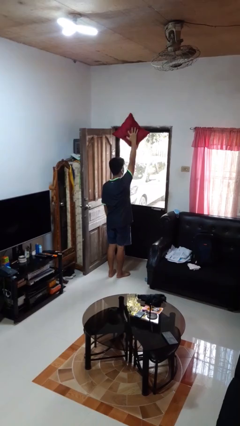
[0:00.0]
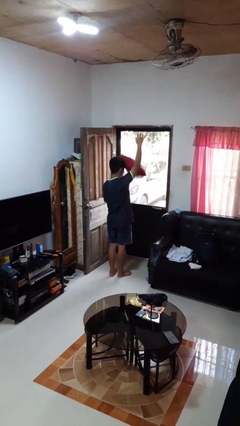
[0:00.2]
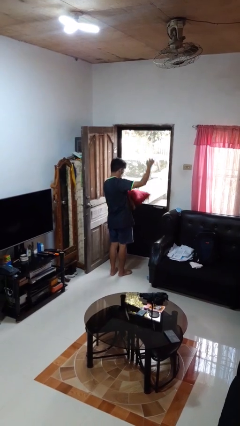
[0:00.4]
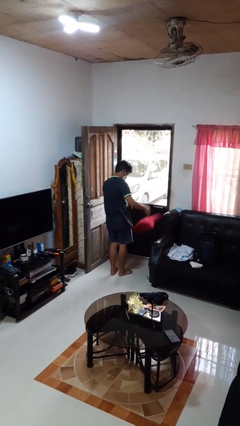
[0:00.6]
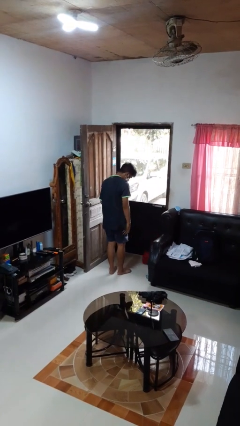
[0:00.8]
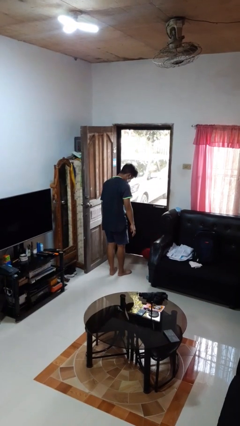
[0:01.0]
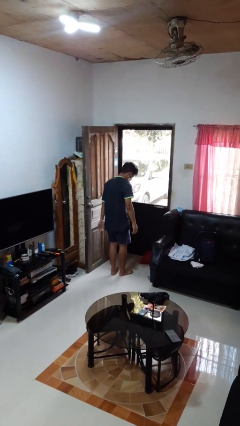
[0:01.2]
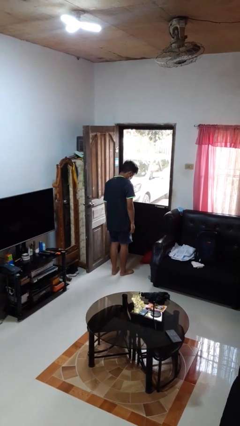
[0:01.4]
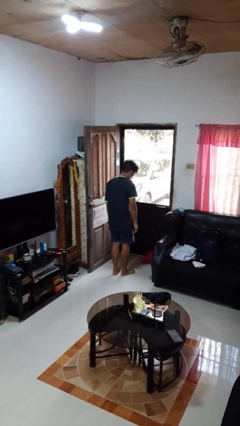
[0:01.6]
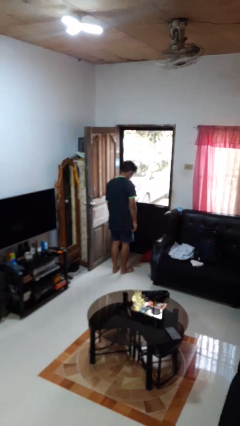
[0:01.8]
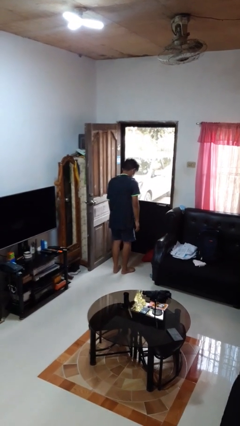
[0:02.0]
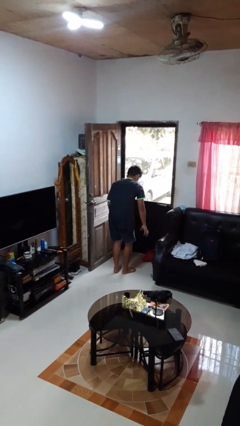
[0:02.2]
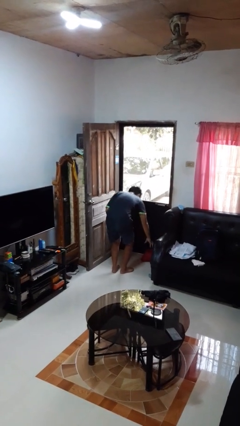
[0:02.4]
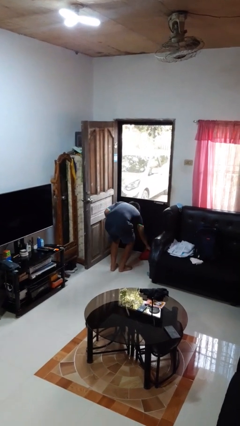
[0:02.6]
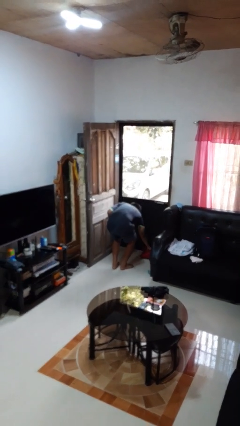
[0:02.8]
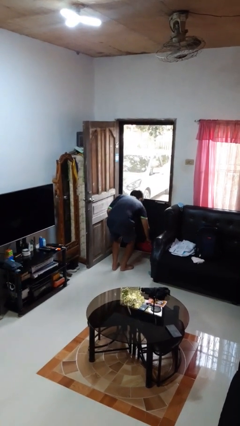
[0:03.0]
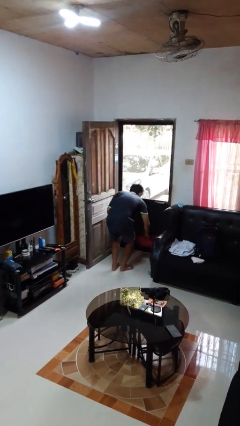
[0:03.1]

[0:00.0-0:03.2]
person drops object

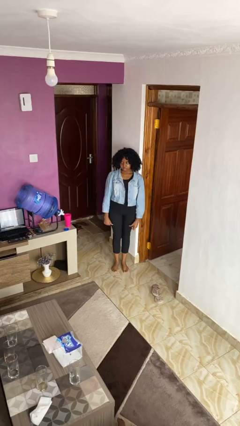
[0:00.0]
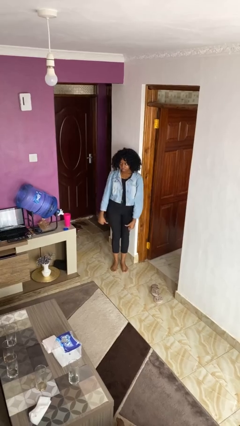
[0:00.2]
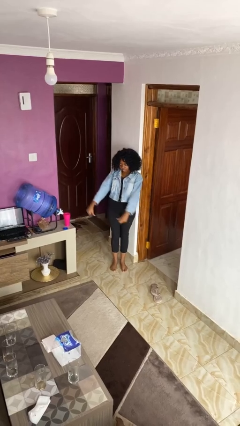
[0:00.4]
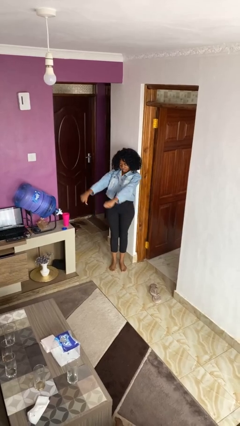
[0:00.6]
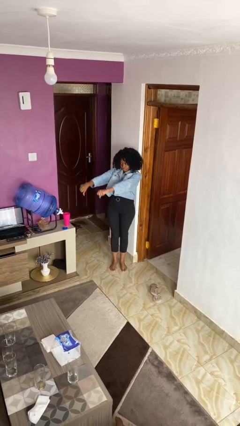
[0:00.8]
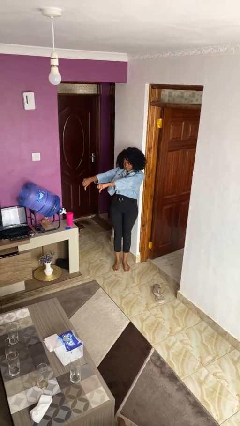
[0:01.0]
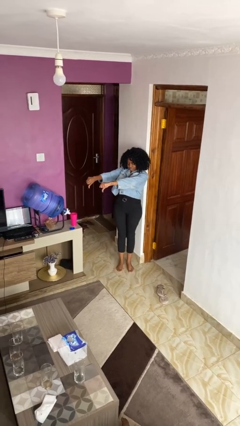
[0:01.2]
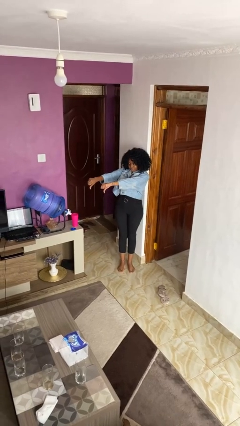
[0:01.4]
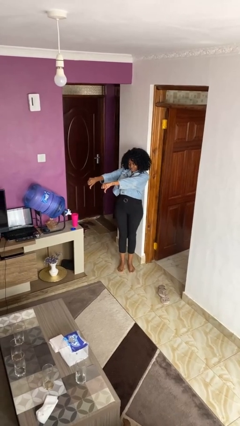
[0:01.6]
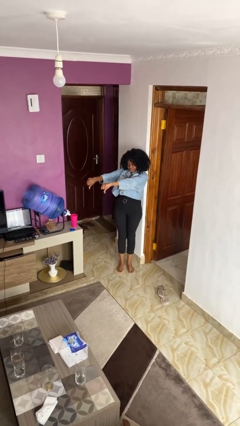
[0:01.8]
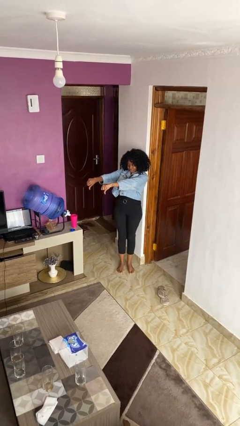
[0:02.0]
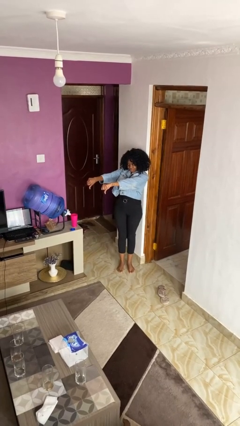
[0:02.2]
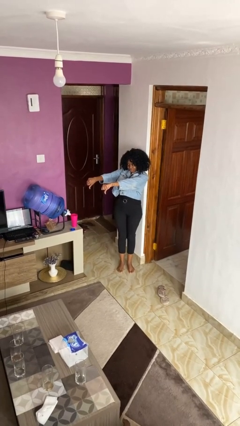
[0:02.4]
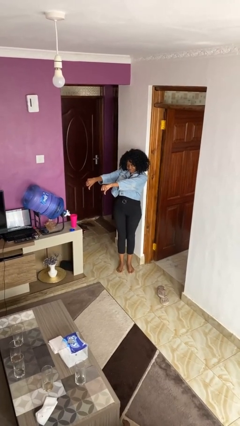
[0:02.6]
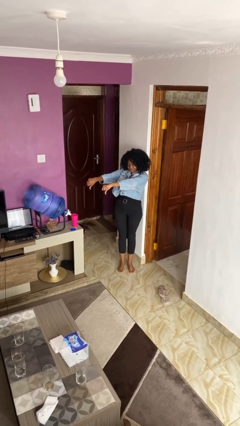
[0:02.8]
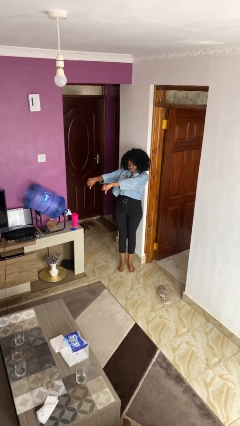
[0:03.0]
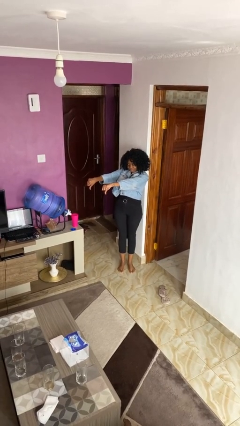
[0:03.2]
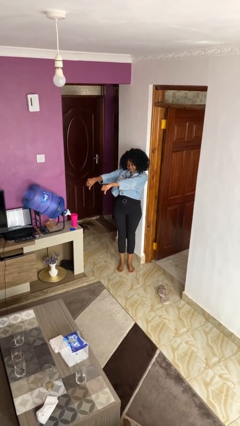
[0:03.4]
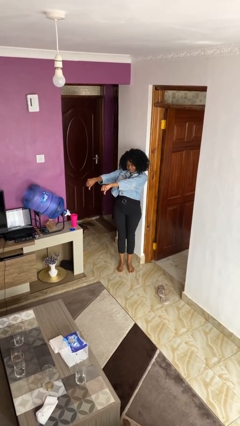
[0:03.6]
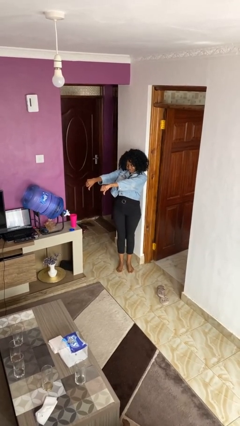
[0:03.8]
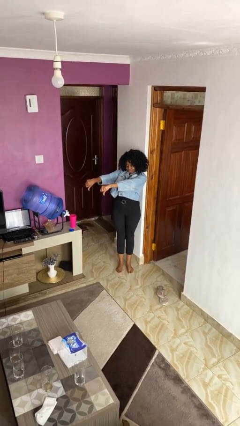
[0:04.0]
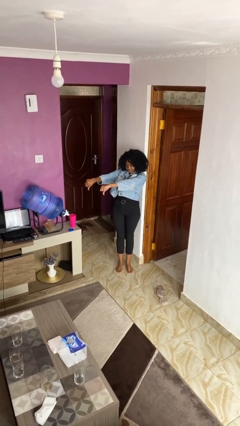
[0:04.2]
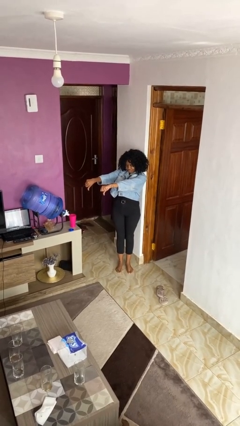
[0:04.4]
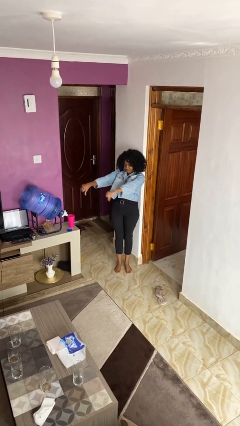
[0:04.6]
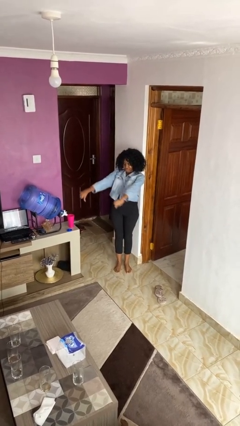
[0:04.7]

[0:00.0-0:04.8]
person gestures thumbs down

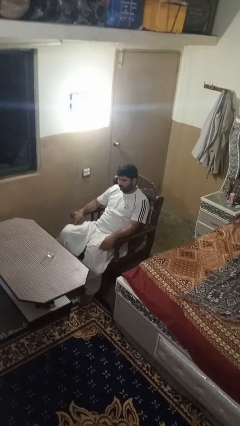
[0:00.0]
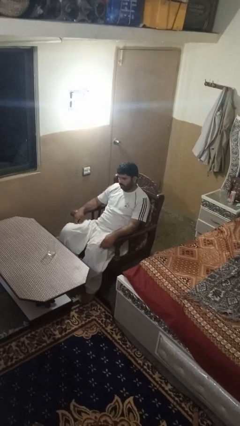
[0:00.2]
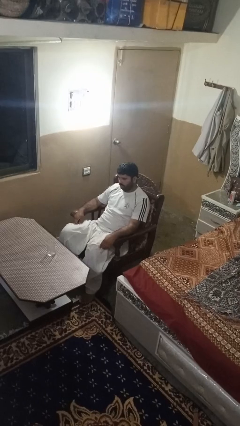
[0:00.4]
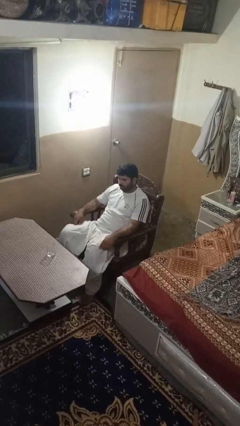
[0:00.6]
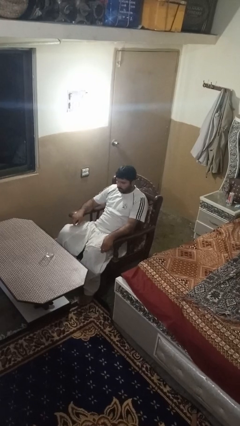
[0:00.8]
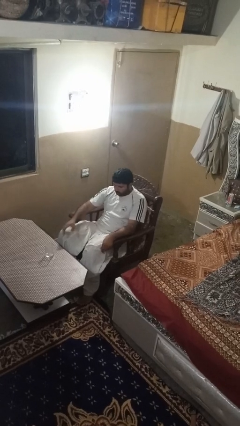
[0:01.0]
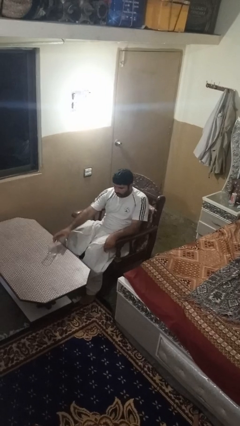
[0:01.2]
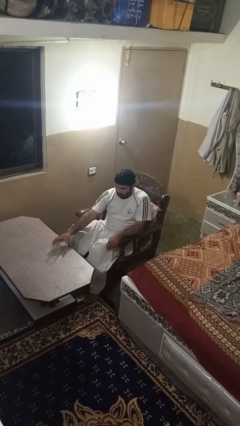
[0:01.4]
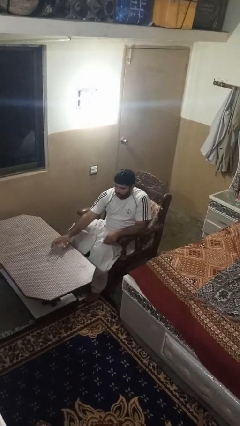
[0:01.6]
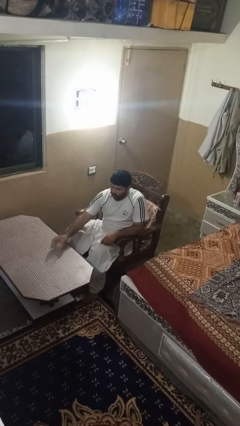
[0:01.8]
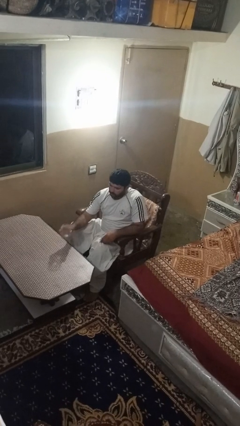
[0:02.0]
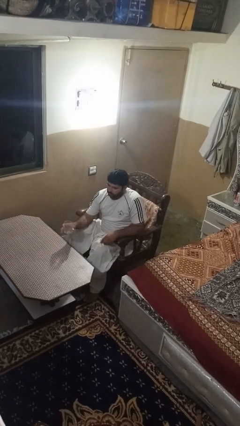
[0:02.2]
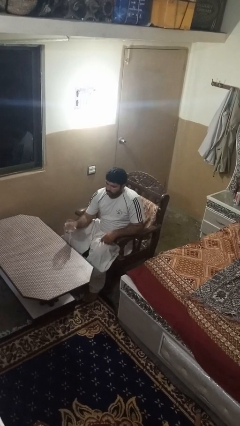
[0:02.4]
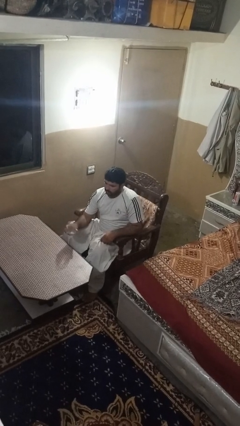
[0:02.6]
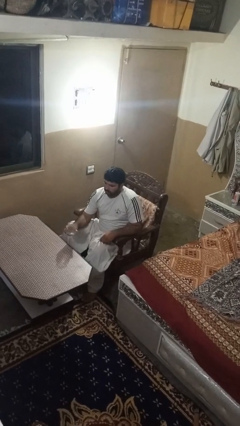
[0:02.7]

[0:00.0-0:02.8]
person picks up object from table

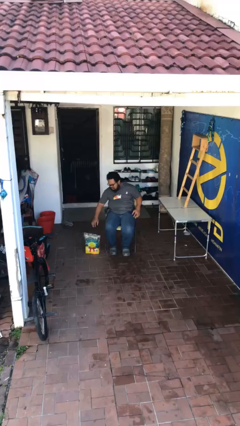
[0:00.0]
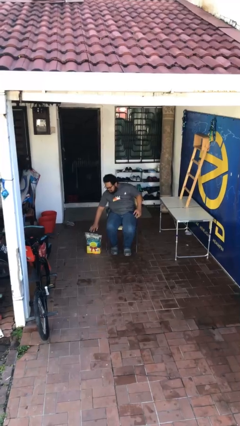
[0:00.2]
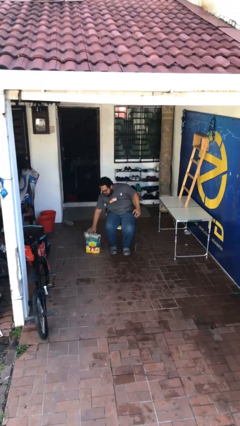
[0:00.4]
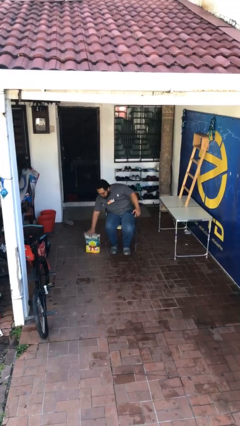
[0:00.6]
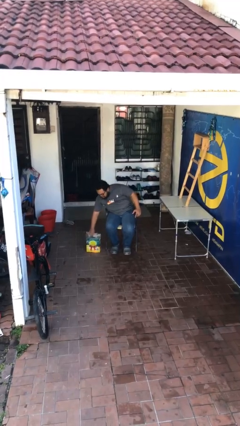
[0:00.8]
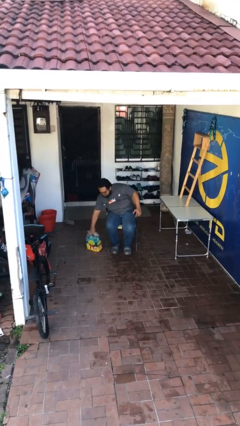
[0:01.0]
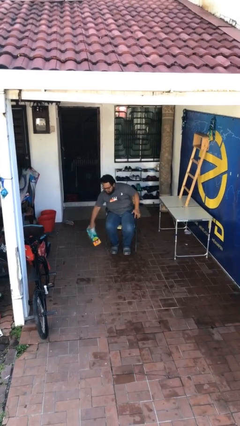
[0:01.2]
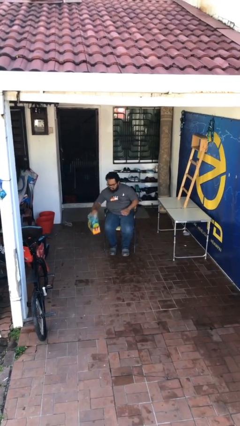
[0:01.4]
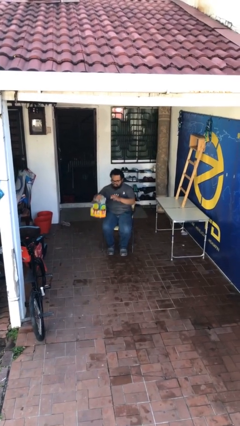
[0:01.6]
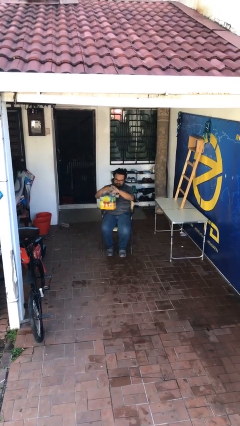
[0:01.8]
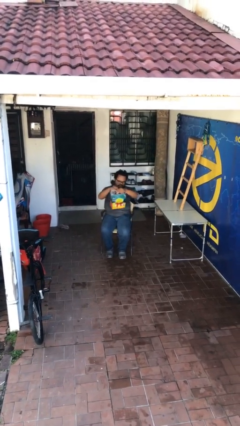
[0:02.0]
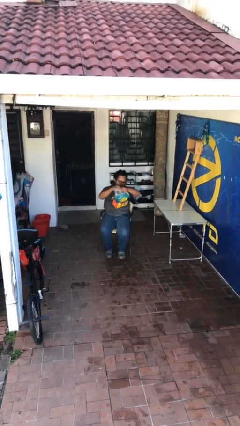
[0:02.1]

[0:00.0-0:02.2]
person picks up object from floor

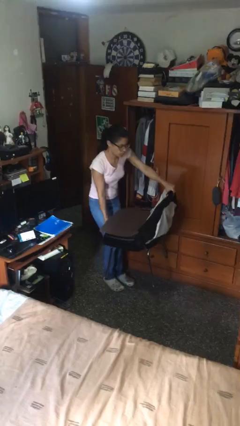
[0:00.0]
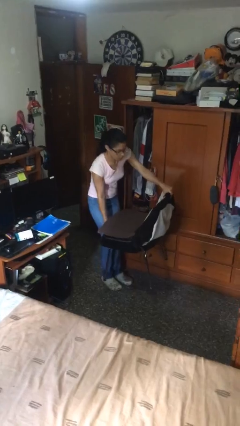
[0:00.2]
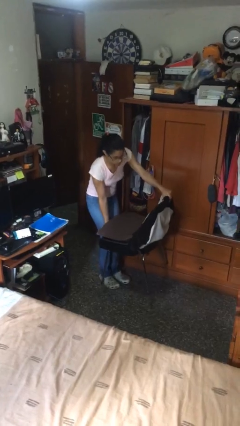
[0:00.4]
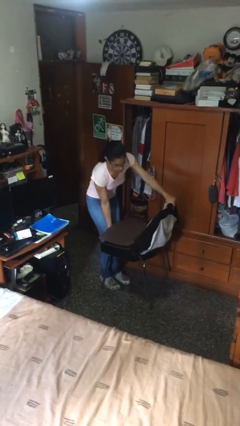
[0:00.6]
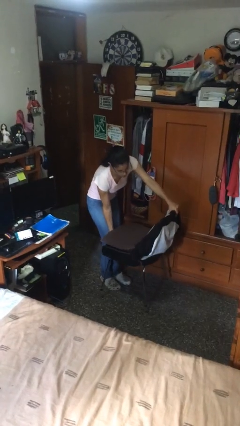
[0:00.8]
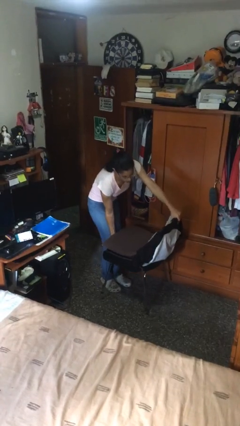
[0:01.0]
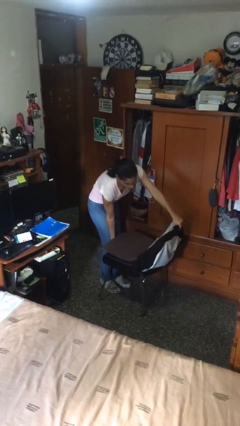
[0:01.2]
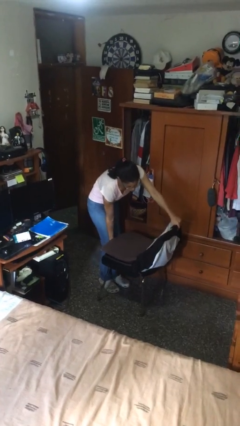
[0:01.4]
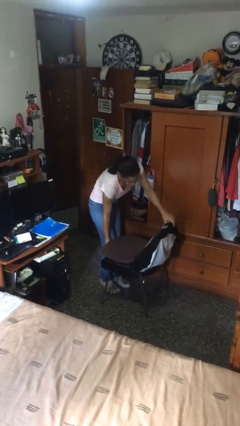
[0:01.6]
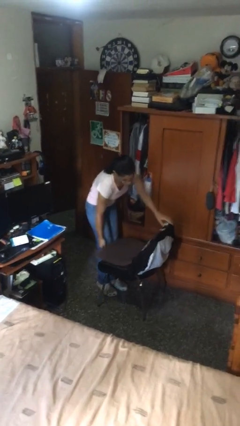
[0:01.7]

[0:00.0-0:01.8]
person puts down object on floor

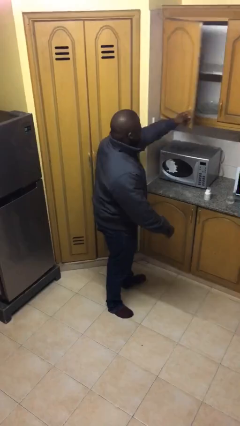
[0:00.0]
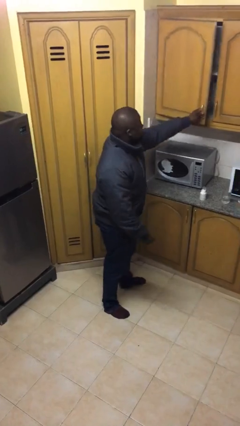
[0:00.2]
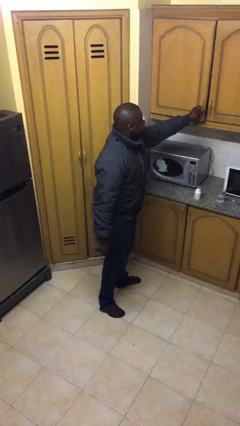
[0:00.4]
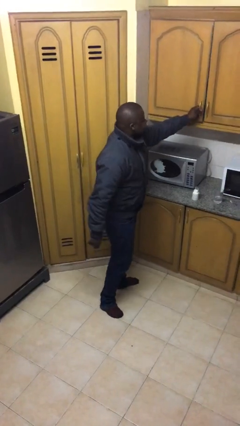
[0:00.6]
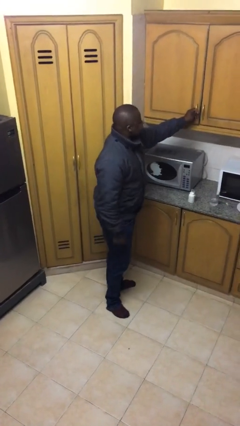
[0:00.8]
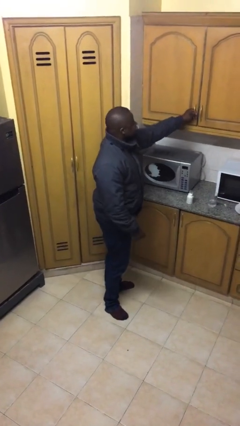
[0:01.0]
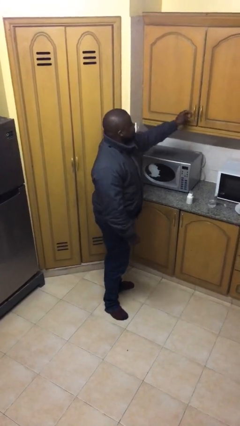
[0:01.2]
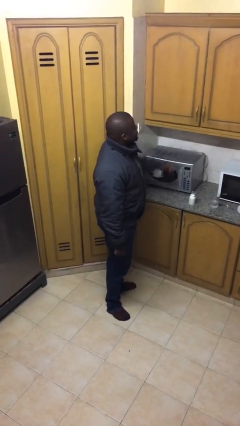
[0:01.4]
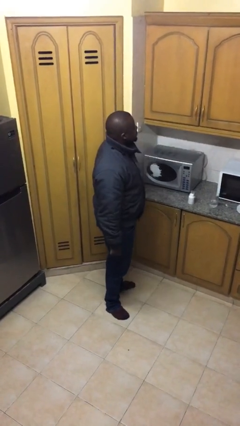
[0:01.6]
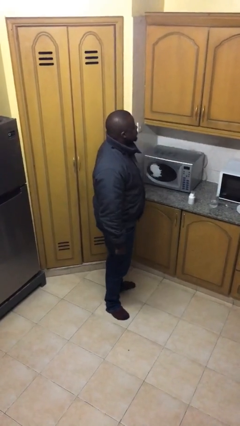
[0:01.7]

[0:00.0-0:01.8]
person closes cabinet

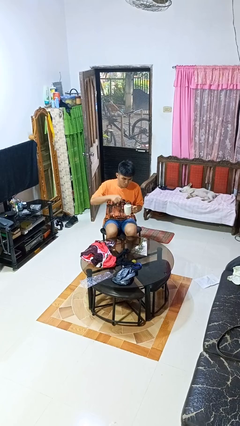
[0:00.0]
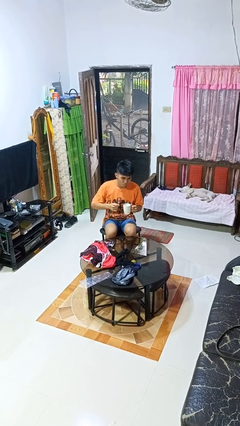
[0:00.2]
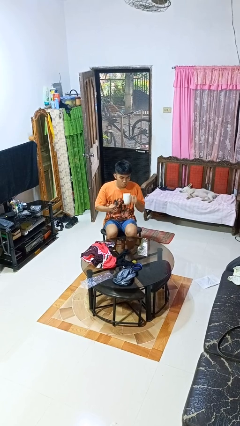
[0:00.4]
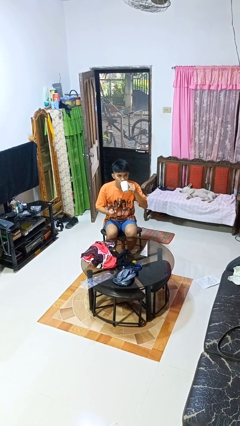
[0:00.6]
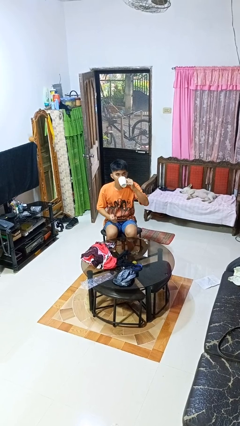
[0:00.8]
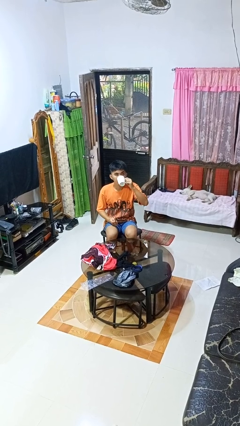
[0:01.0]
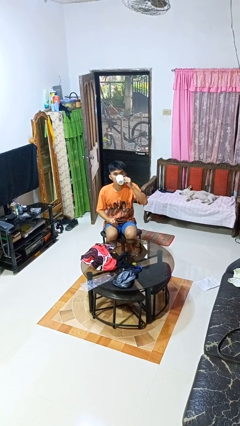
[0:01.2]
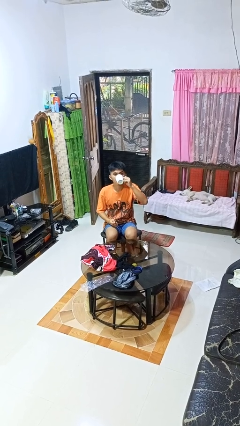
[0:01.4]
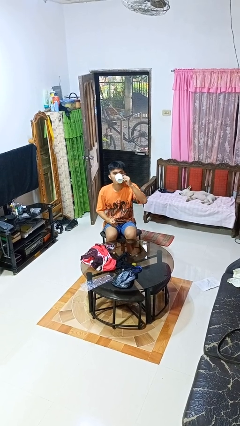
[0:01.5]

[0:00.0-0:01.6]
person drinks from mug
